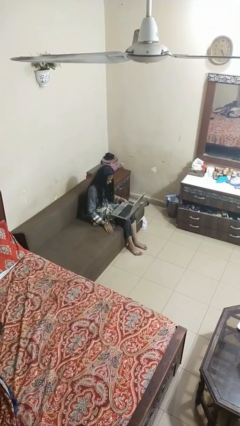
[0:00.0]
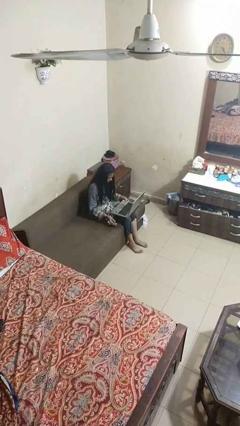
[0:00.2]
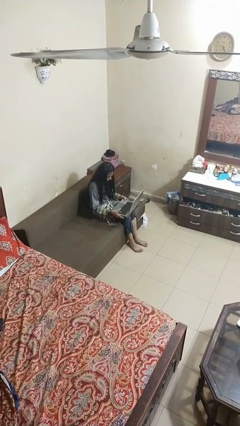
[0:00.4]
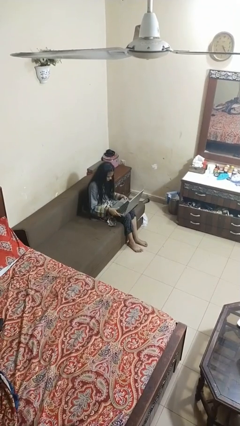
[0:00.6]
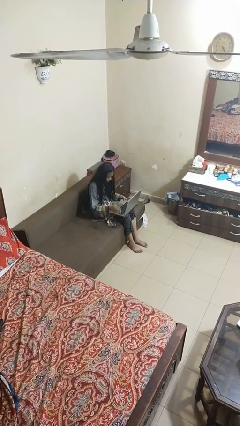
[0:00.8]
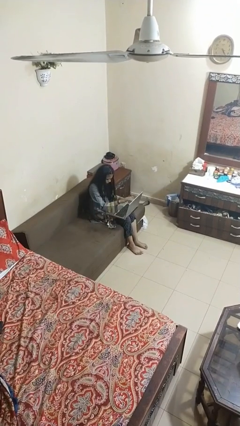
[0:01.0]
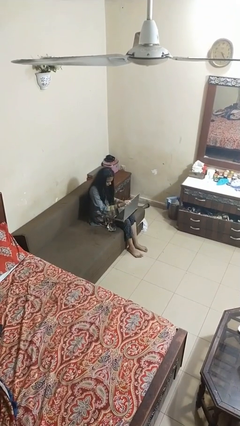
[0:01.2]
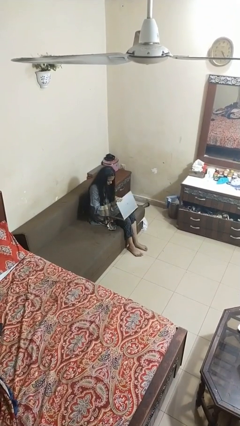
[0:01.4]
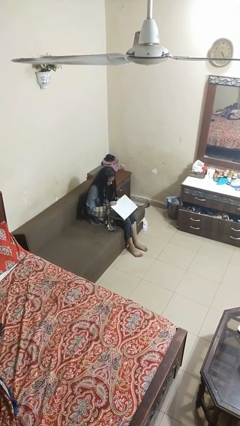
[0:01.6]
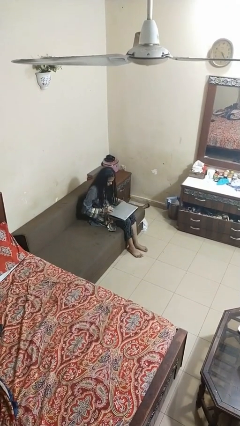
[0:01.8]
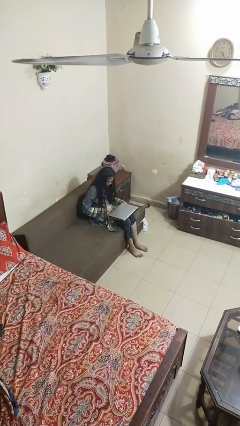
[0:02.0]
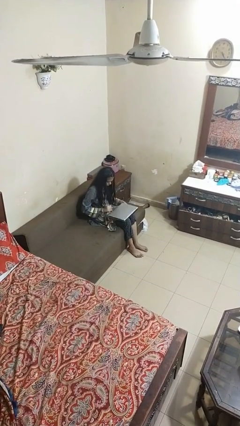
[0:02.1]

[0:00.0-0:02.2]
person closes laptop

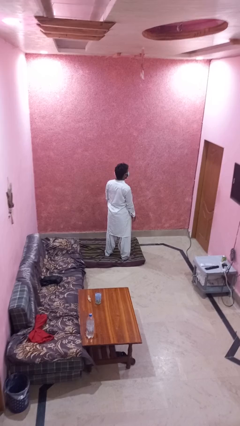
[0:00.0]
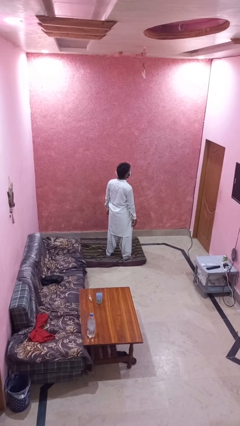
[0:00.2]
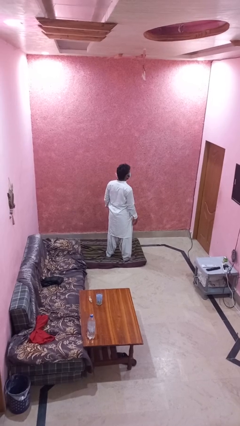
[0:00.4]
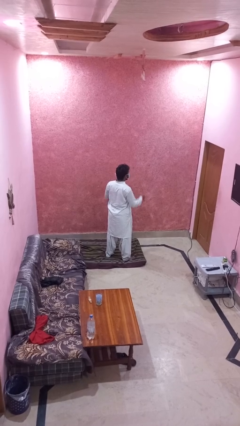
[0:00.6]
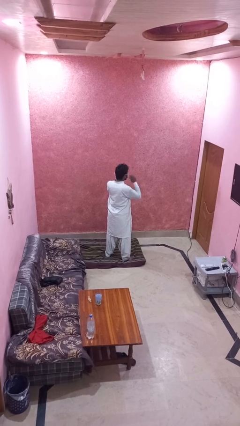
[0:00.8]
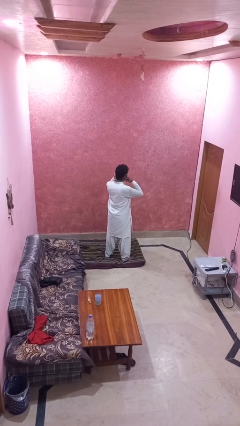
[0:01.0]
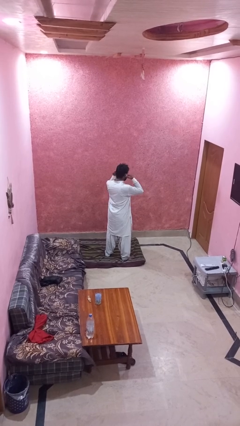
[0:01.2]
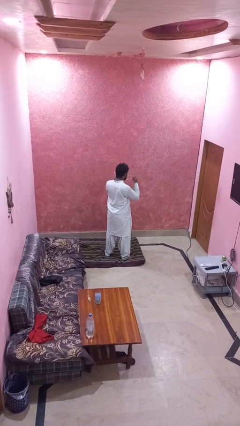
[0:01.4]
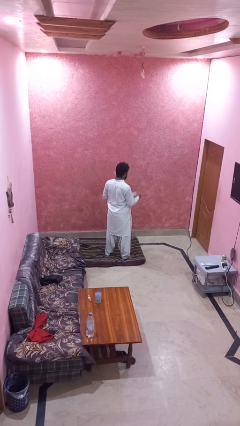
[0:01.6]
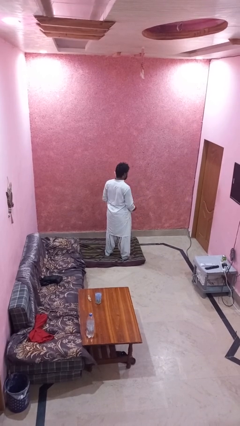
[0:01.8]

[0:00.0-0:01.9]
person takes off facemask

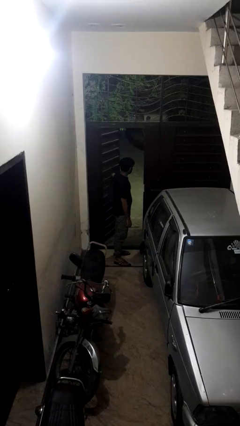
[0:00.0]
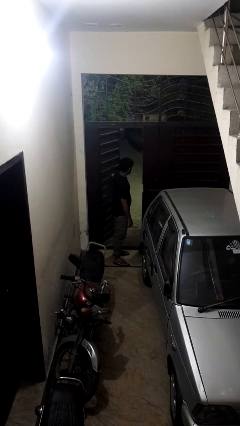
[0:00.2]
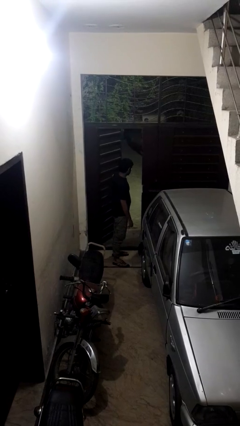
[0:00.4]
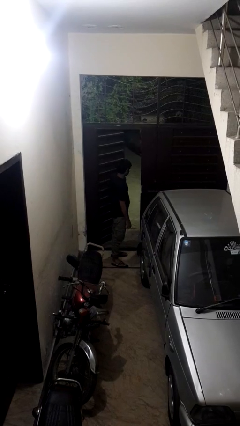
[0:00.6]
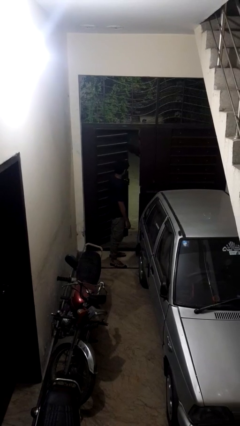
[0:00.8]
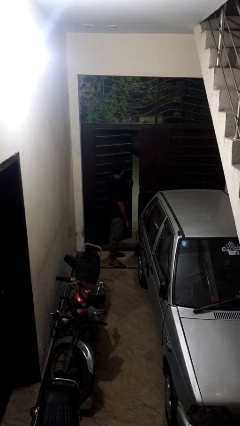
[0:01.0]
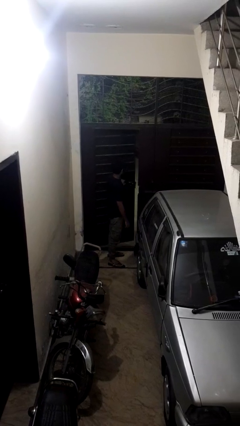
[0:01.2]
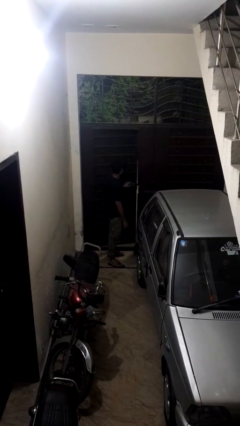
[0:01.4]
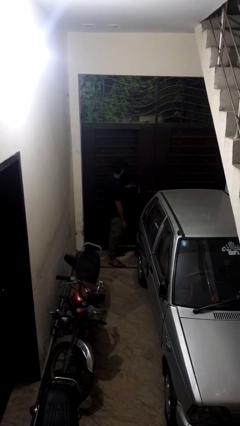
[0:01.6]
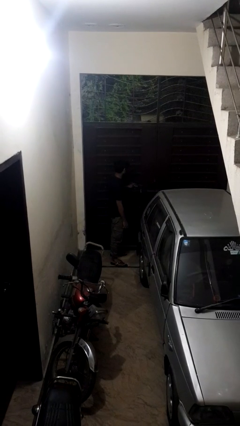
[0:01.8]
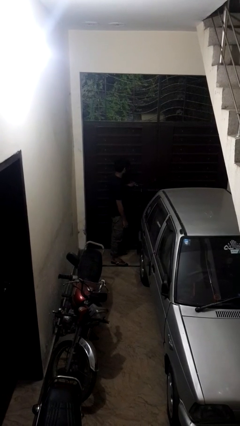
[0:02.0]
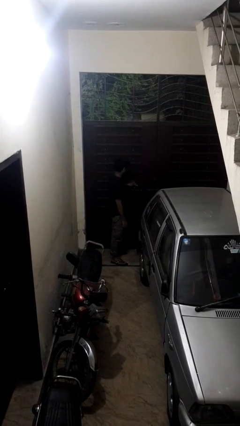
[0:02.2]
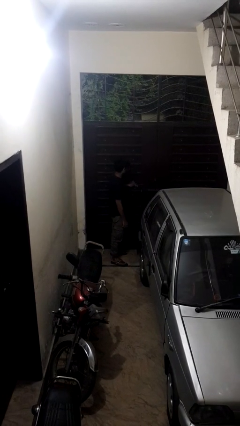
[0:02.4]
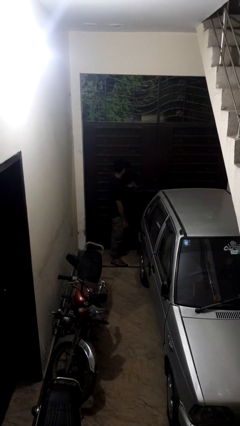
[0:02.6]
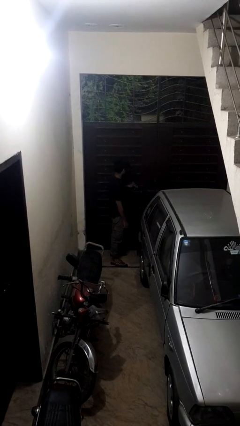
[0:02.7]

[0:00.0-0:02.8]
person closes gate

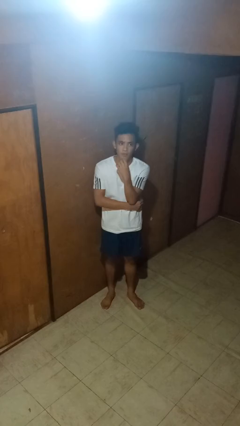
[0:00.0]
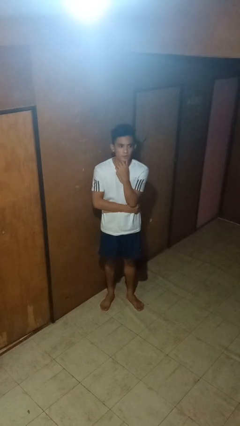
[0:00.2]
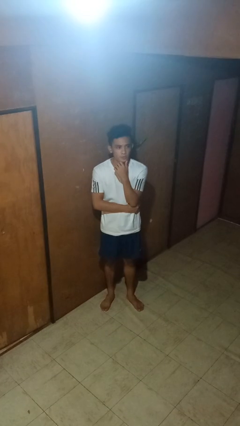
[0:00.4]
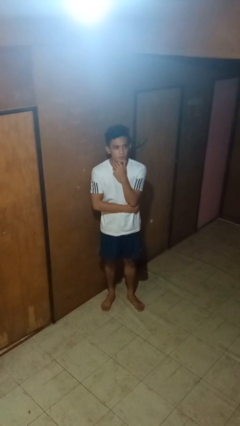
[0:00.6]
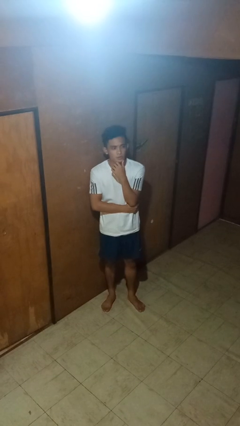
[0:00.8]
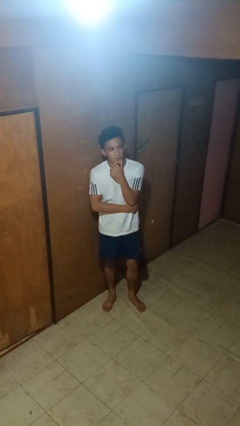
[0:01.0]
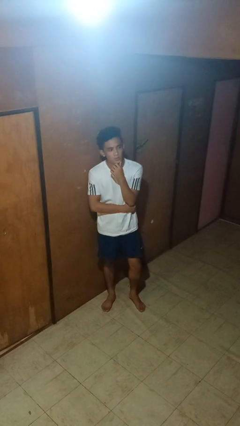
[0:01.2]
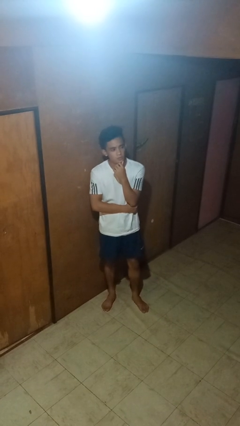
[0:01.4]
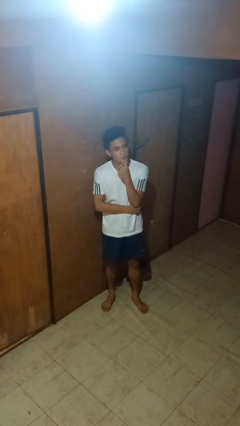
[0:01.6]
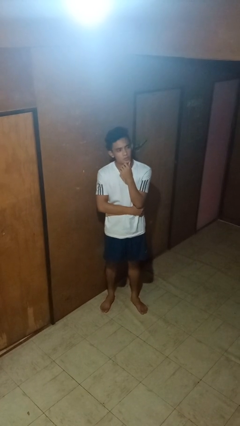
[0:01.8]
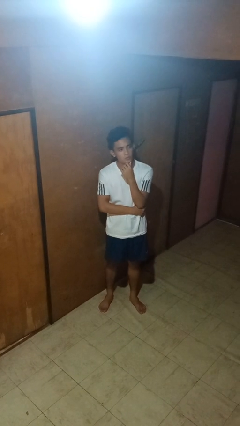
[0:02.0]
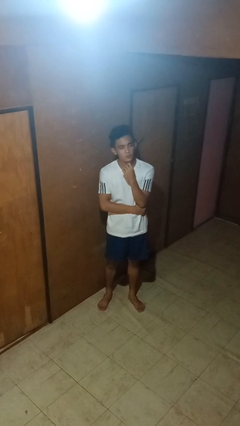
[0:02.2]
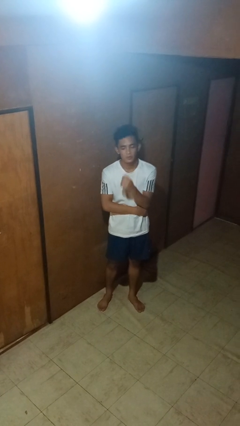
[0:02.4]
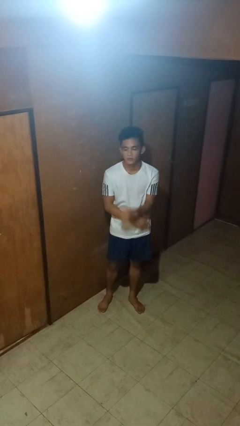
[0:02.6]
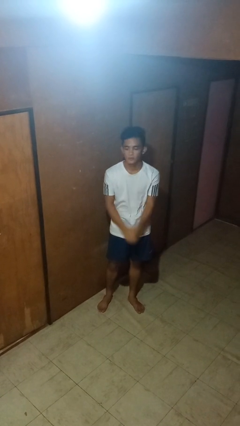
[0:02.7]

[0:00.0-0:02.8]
person strokes chin

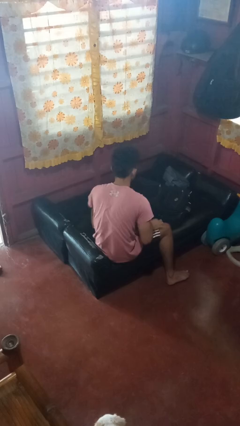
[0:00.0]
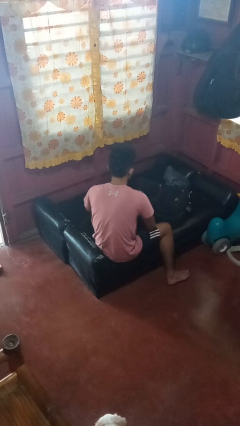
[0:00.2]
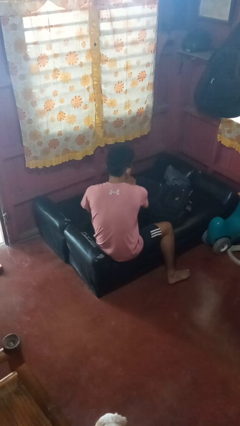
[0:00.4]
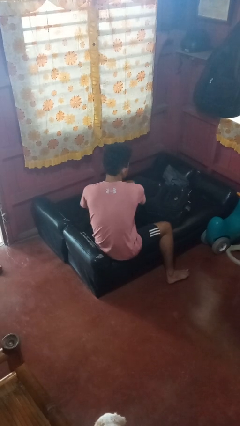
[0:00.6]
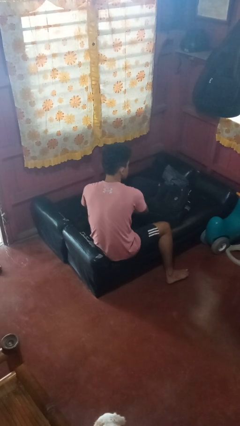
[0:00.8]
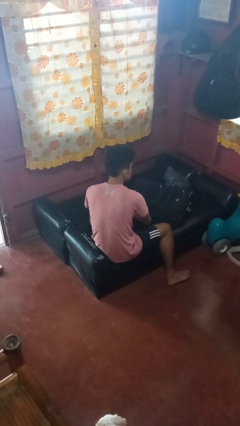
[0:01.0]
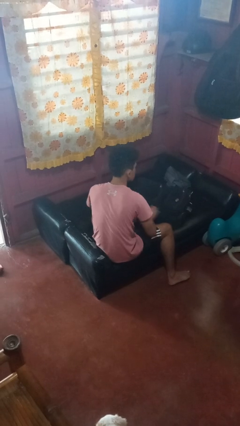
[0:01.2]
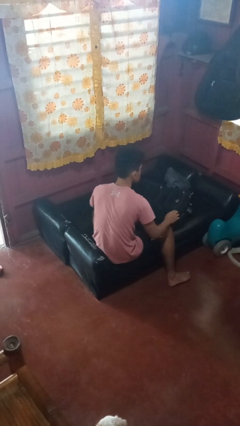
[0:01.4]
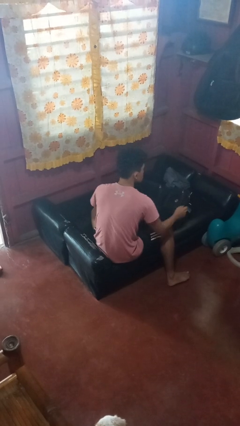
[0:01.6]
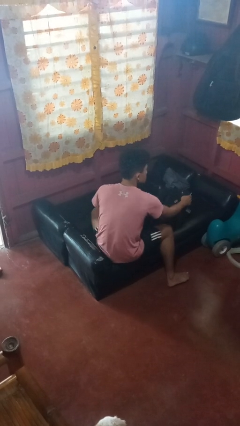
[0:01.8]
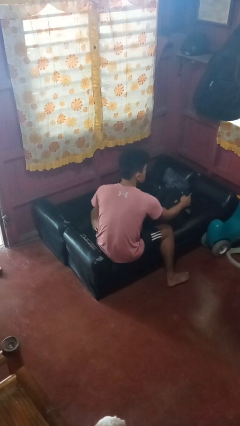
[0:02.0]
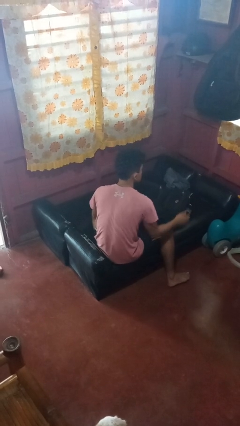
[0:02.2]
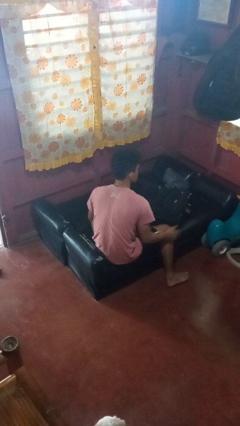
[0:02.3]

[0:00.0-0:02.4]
person closes suitcase

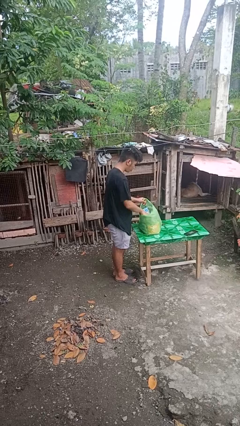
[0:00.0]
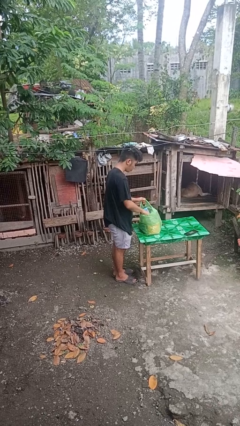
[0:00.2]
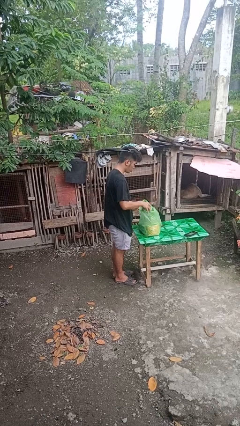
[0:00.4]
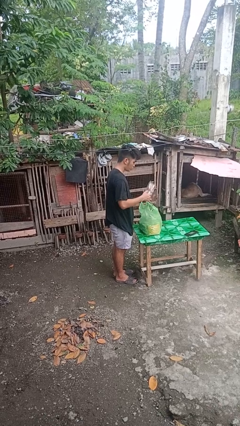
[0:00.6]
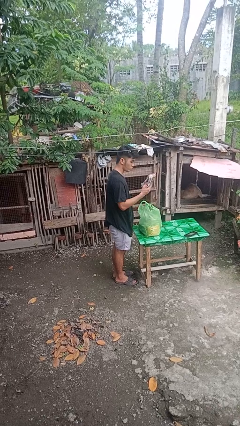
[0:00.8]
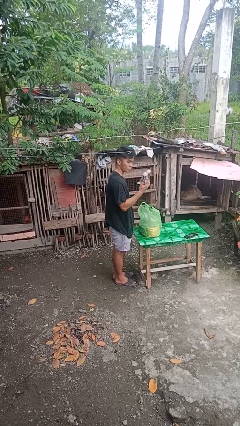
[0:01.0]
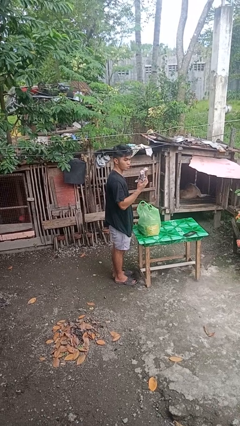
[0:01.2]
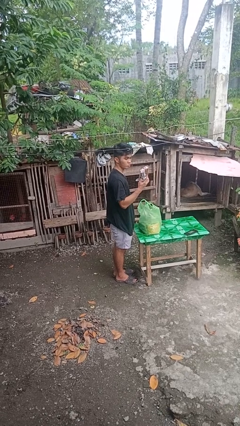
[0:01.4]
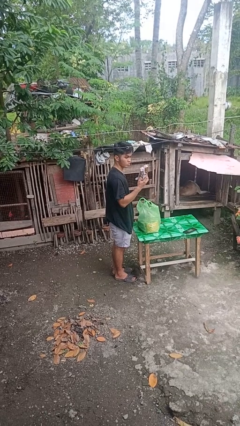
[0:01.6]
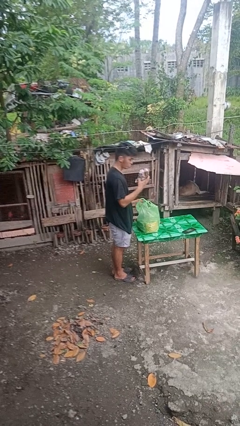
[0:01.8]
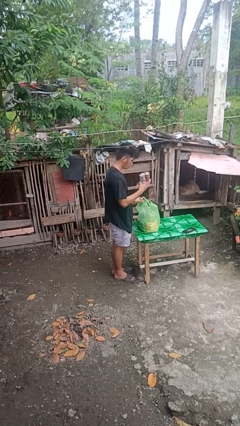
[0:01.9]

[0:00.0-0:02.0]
person takes object from bag

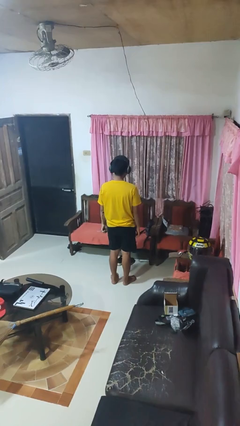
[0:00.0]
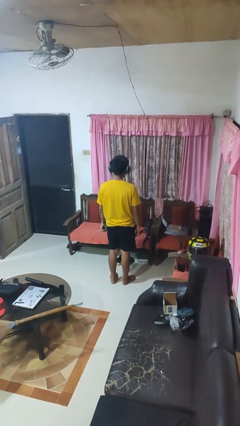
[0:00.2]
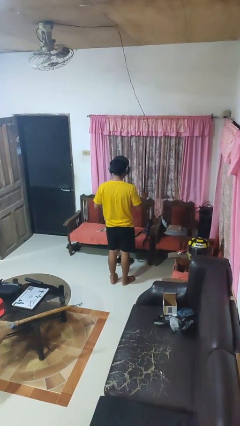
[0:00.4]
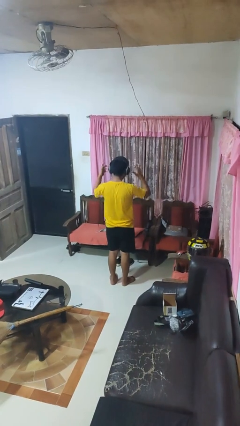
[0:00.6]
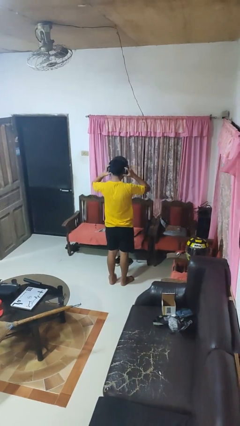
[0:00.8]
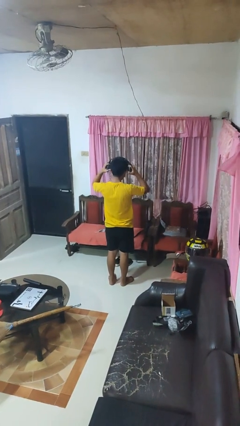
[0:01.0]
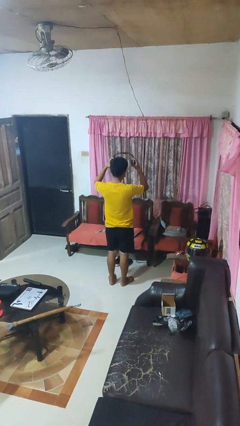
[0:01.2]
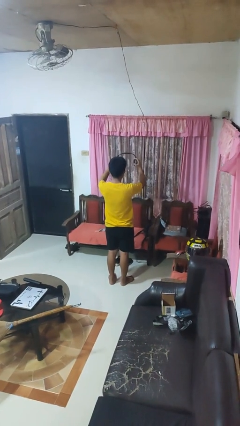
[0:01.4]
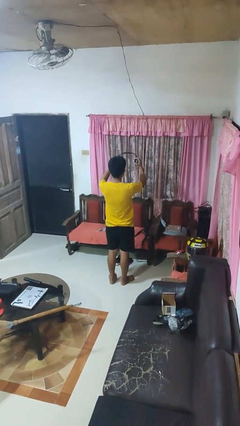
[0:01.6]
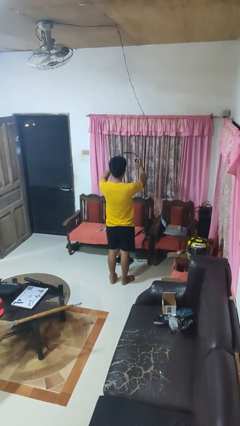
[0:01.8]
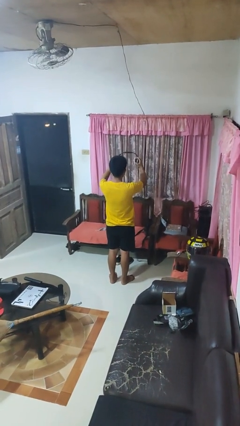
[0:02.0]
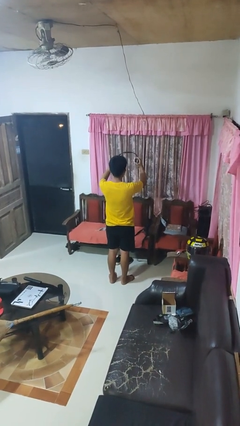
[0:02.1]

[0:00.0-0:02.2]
person takes off headphones

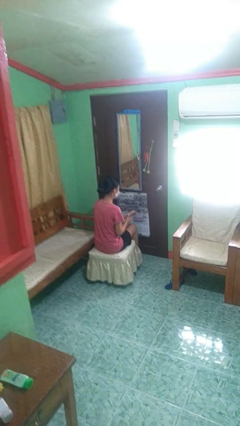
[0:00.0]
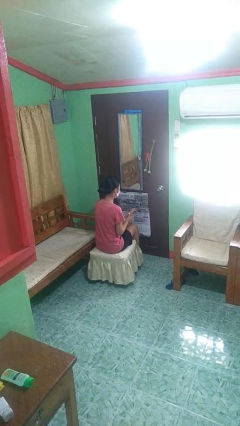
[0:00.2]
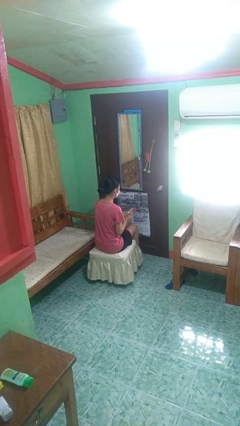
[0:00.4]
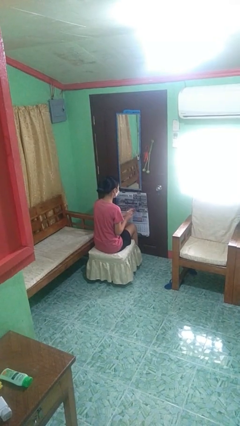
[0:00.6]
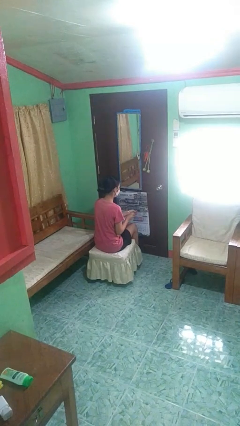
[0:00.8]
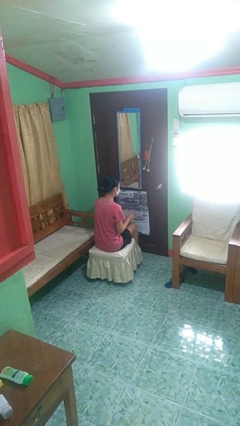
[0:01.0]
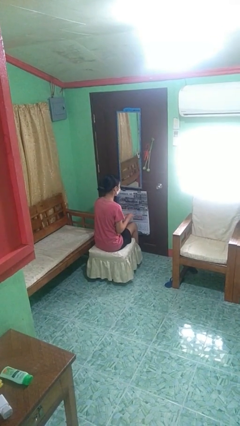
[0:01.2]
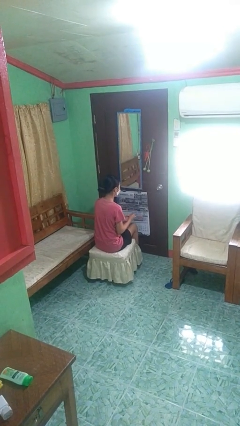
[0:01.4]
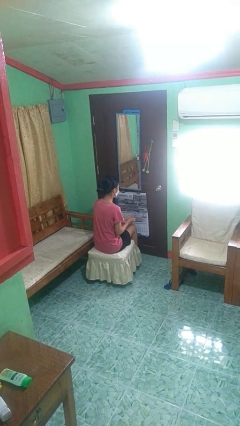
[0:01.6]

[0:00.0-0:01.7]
person takes off wristwatch
